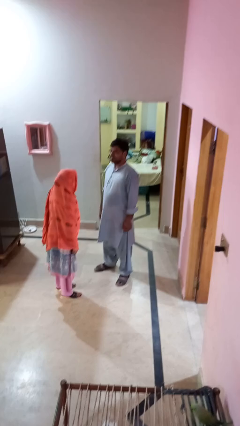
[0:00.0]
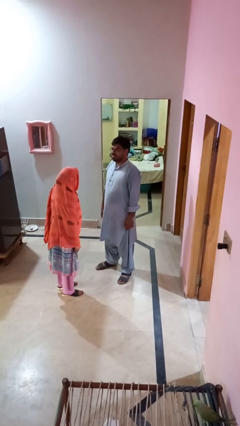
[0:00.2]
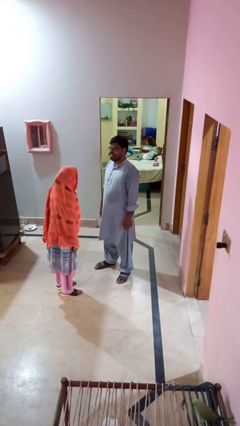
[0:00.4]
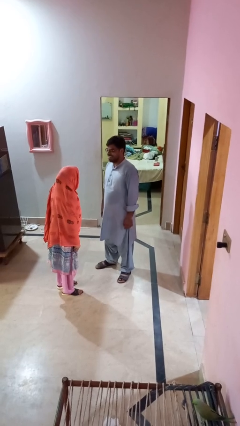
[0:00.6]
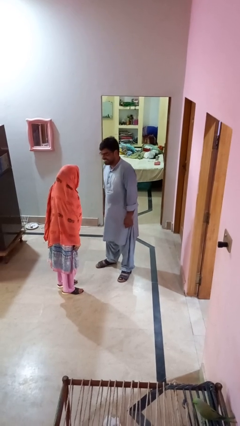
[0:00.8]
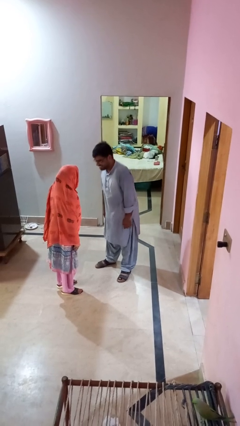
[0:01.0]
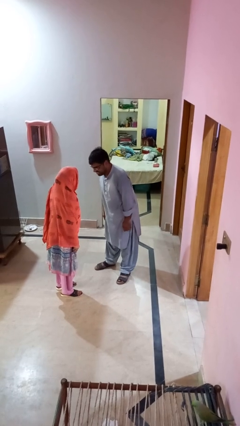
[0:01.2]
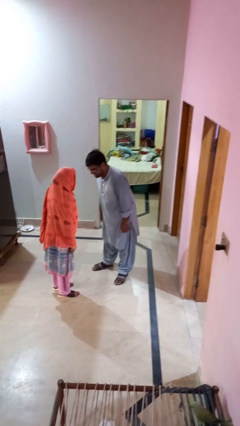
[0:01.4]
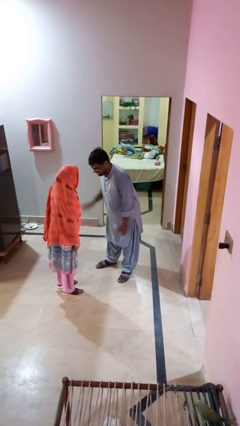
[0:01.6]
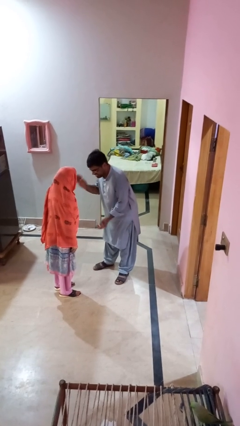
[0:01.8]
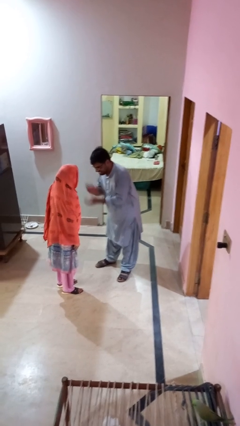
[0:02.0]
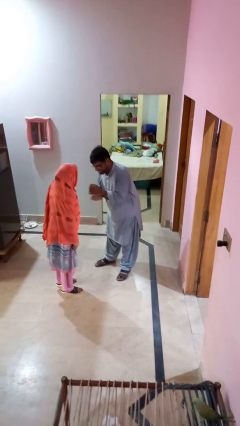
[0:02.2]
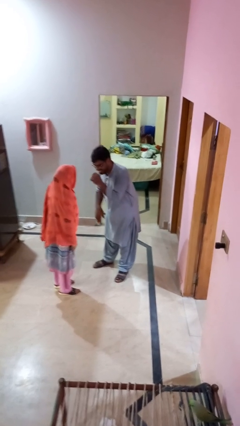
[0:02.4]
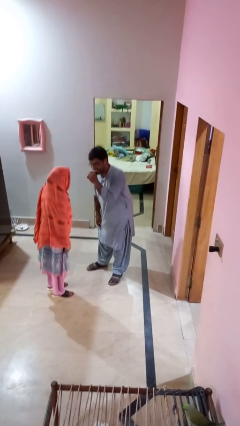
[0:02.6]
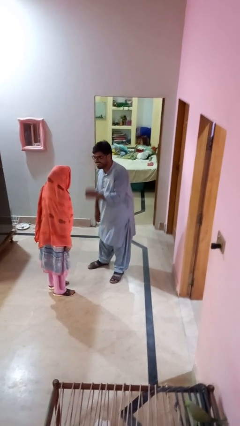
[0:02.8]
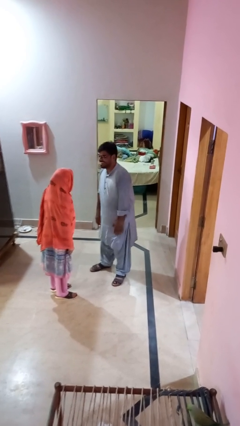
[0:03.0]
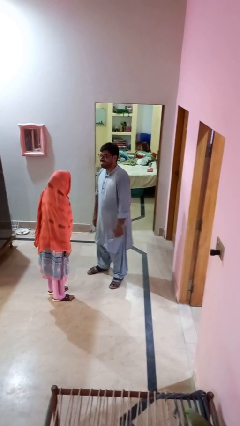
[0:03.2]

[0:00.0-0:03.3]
person laughs with person

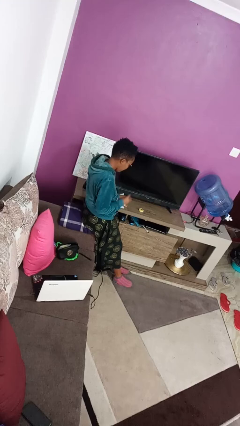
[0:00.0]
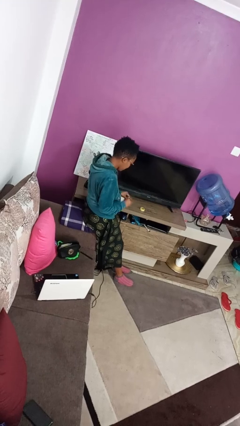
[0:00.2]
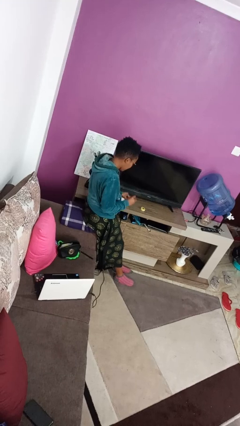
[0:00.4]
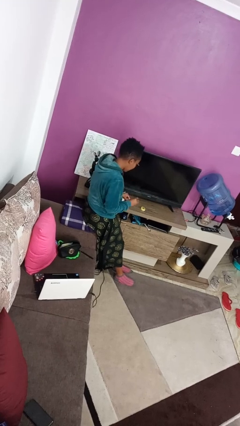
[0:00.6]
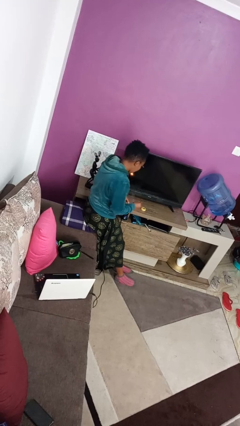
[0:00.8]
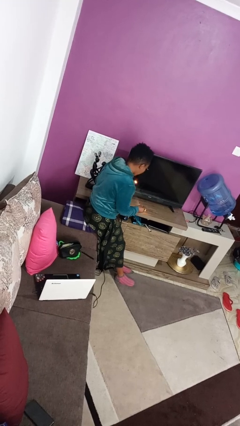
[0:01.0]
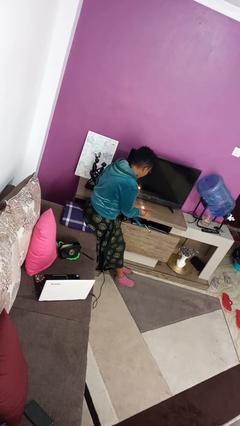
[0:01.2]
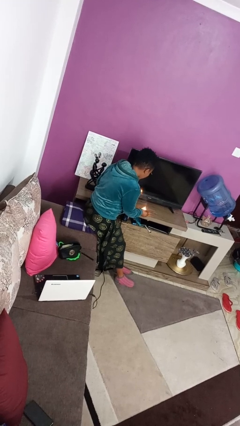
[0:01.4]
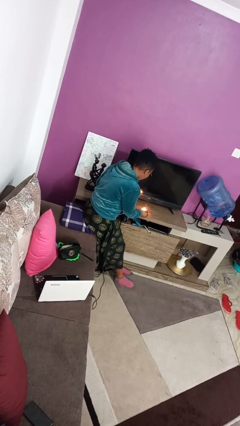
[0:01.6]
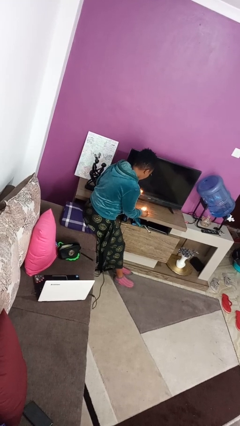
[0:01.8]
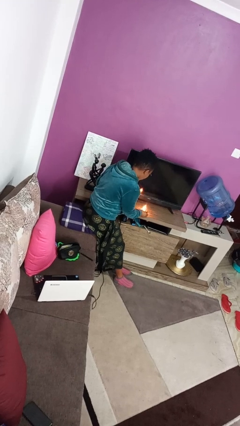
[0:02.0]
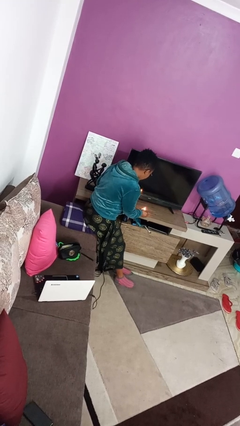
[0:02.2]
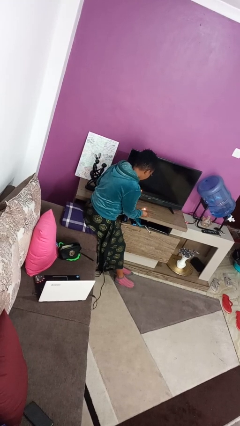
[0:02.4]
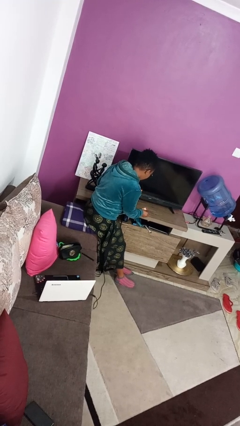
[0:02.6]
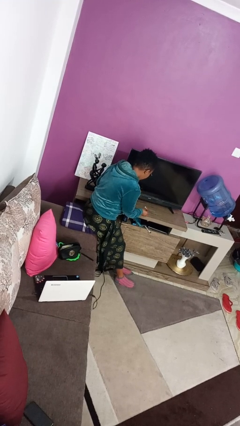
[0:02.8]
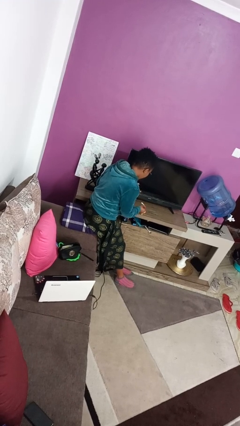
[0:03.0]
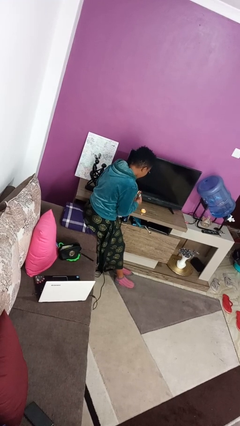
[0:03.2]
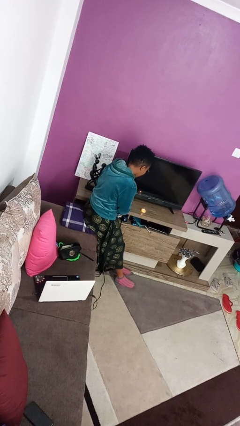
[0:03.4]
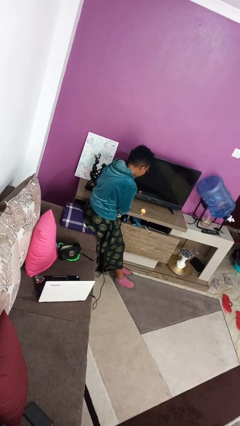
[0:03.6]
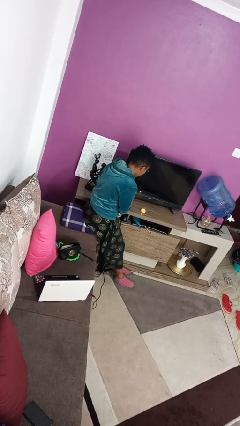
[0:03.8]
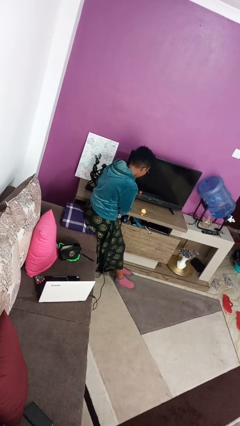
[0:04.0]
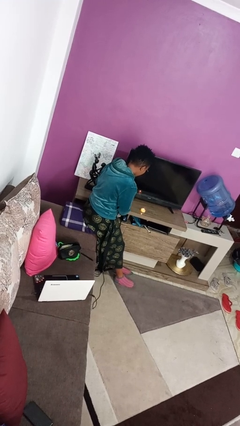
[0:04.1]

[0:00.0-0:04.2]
person lights candle

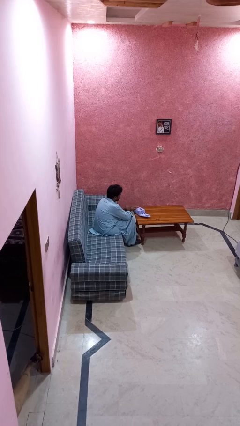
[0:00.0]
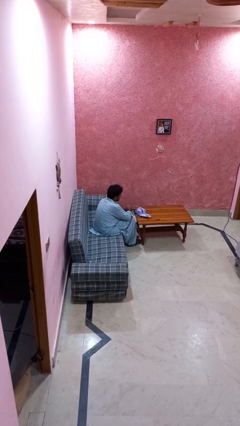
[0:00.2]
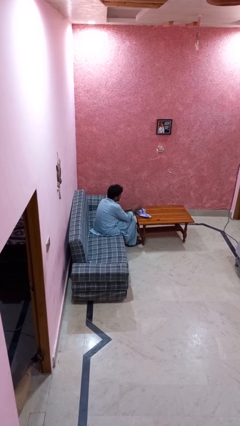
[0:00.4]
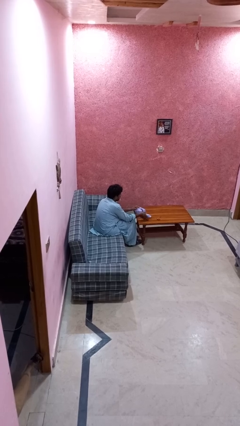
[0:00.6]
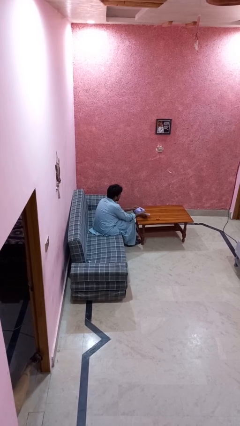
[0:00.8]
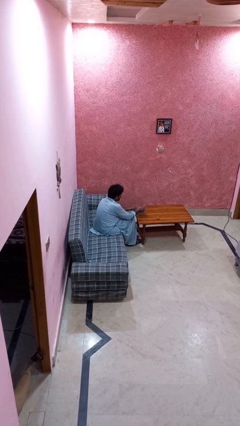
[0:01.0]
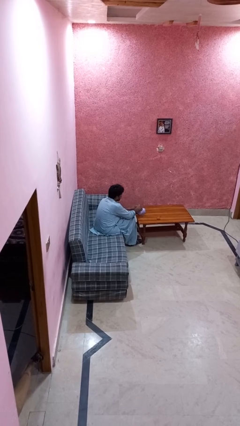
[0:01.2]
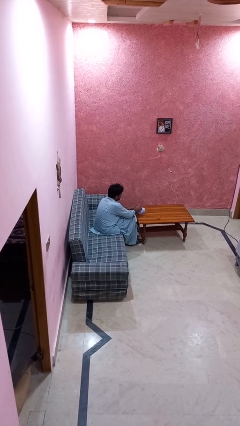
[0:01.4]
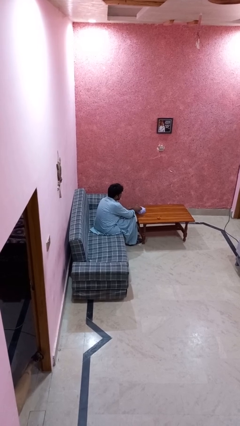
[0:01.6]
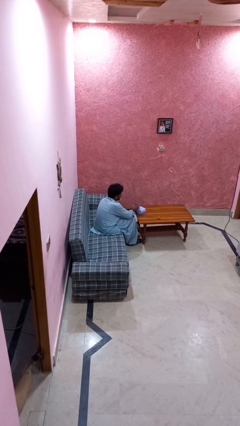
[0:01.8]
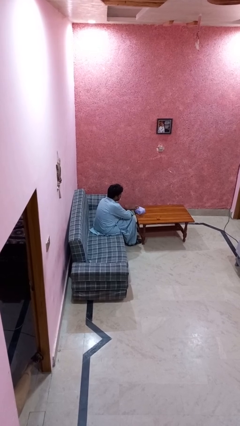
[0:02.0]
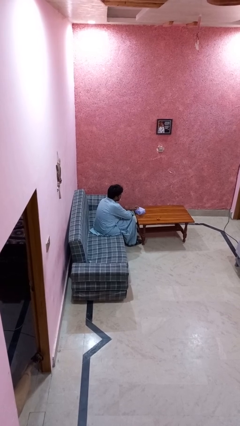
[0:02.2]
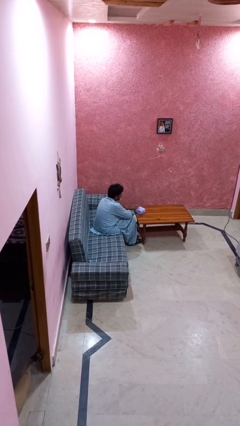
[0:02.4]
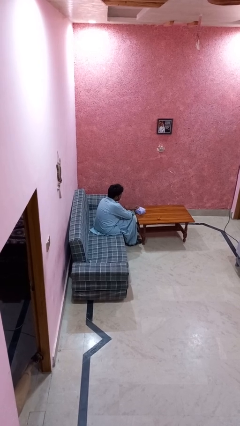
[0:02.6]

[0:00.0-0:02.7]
person wraps box

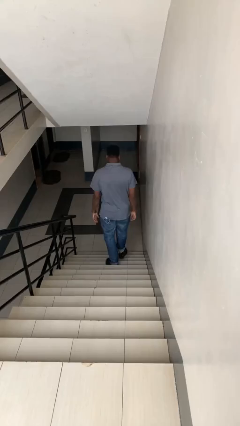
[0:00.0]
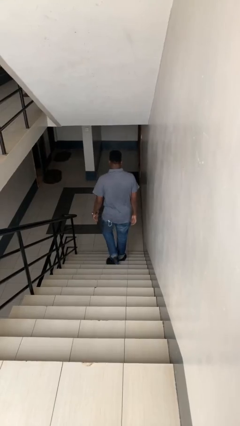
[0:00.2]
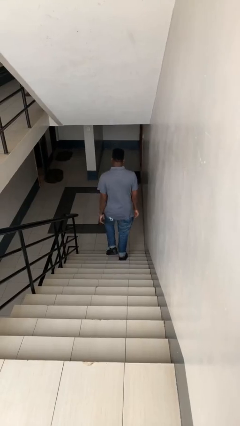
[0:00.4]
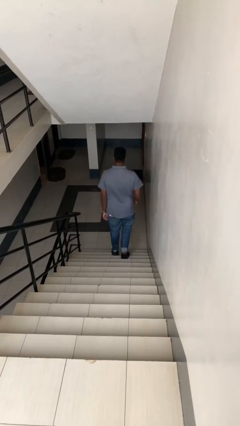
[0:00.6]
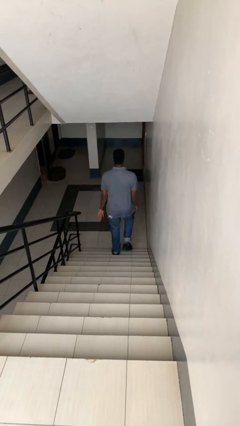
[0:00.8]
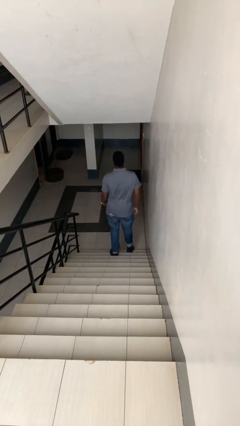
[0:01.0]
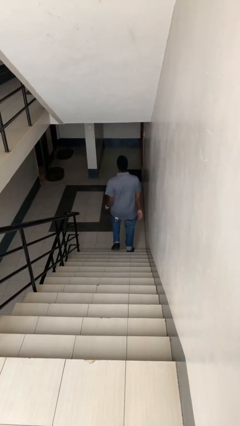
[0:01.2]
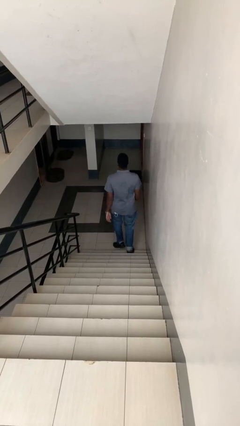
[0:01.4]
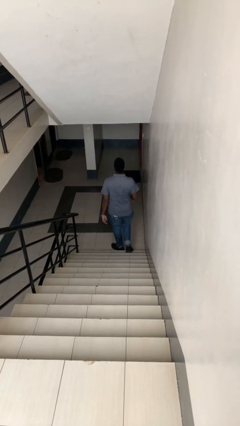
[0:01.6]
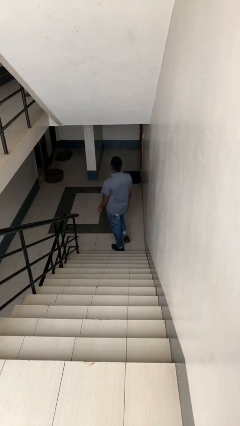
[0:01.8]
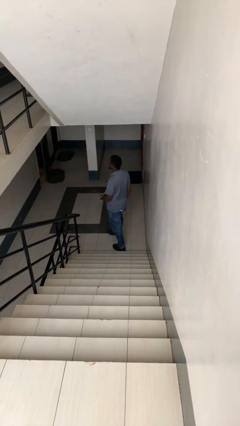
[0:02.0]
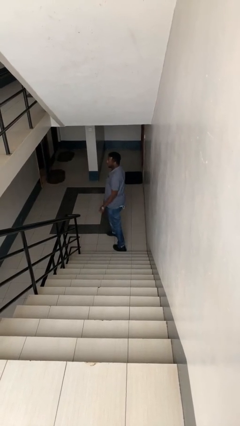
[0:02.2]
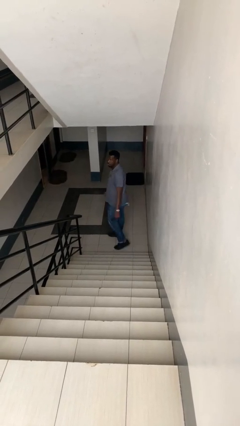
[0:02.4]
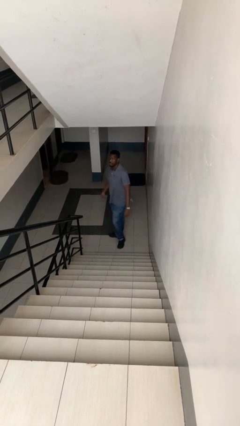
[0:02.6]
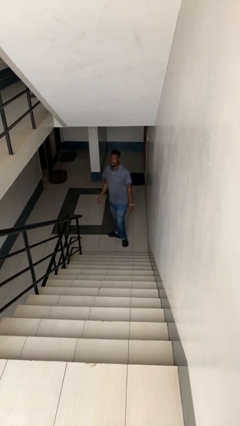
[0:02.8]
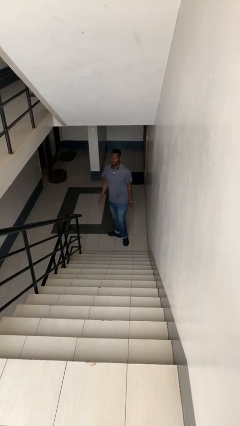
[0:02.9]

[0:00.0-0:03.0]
person climbs down stairs

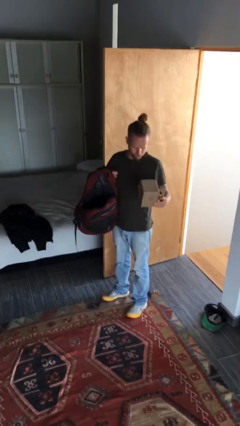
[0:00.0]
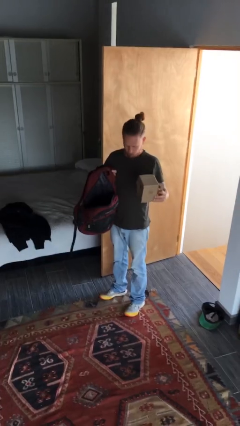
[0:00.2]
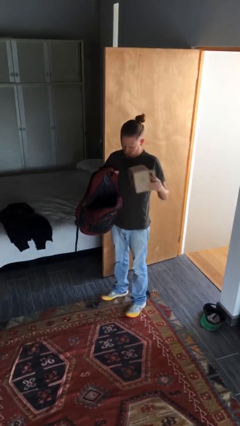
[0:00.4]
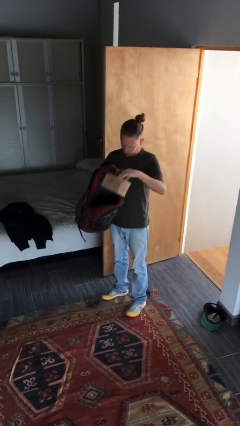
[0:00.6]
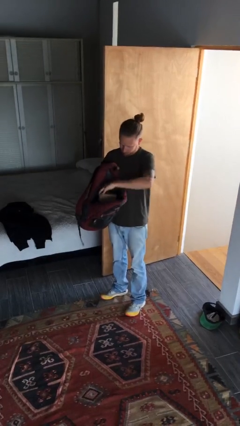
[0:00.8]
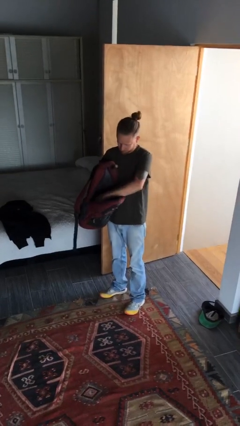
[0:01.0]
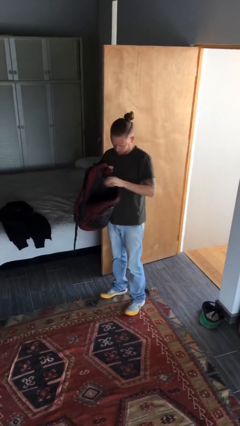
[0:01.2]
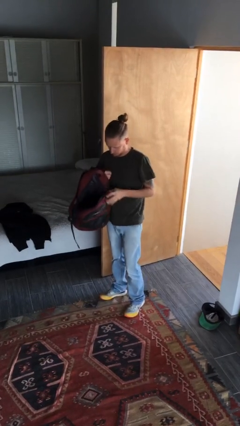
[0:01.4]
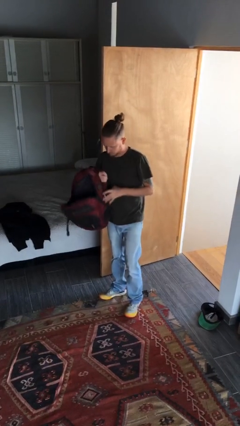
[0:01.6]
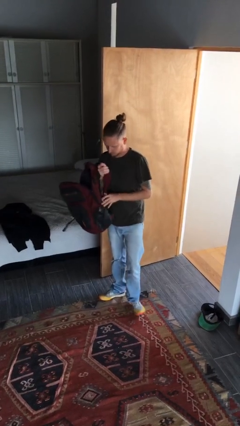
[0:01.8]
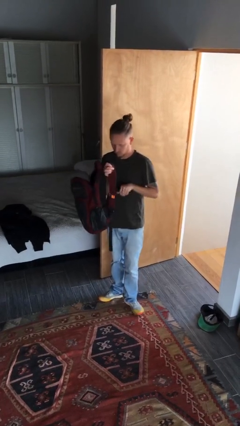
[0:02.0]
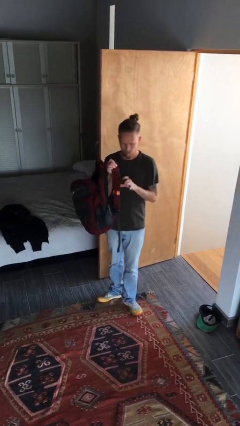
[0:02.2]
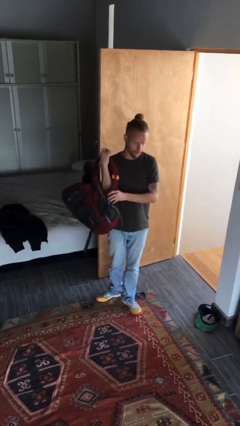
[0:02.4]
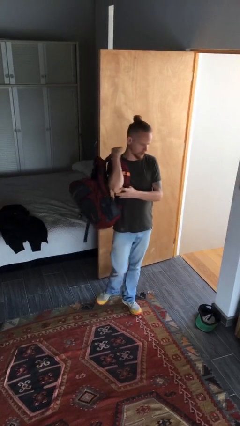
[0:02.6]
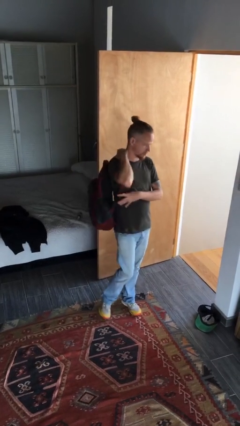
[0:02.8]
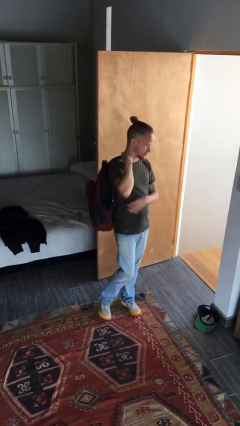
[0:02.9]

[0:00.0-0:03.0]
person puts object into backpack

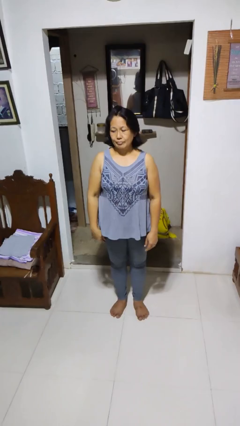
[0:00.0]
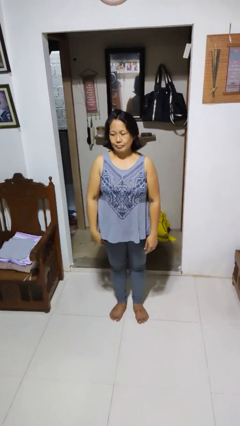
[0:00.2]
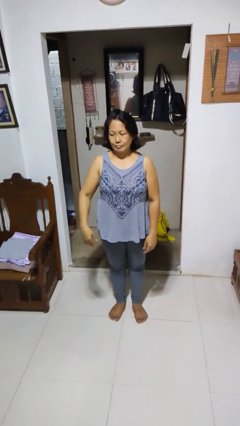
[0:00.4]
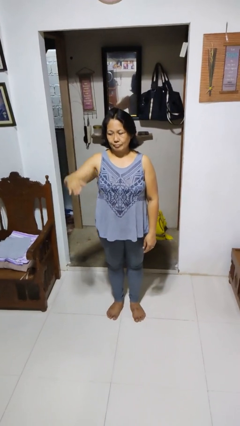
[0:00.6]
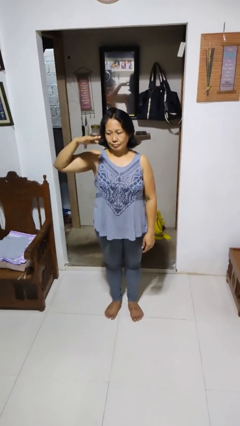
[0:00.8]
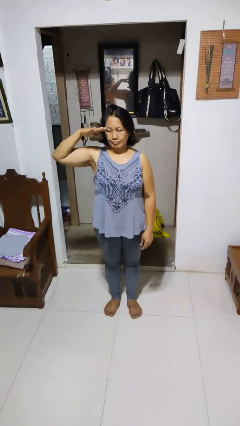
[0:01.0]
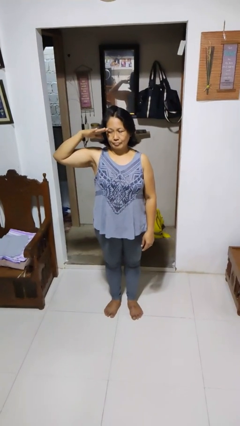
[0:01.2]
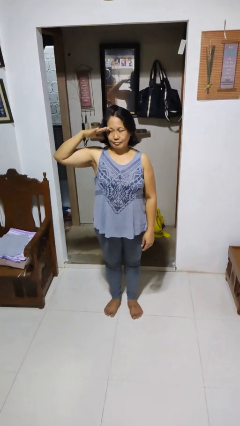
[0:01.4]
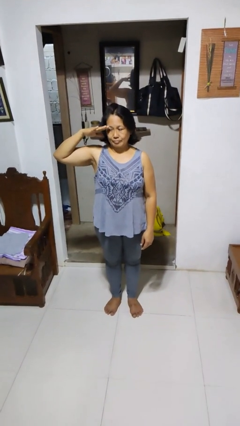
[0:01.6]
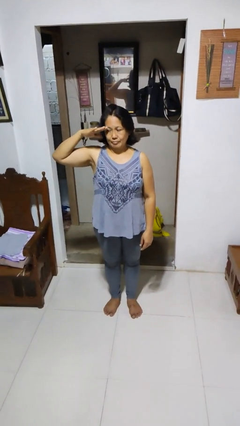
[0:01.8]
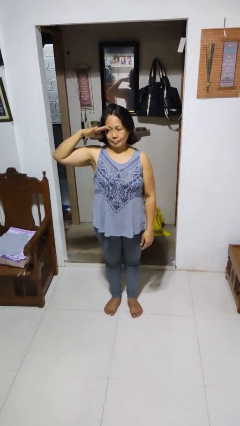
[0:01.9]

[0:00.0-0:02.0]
person salutes
